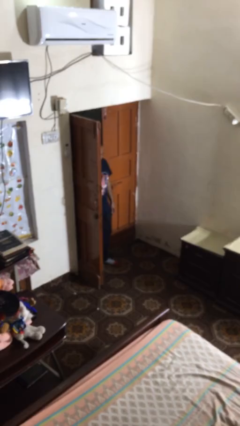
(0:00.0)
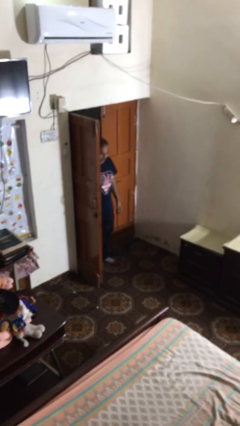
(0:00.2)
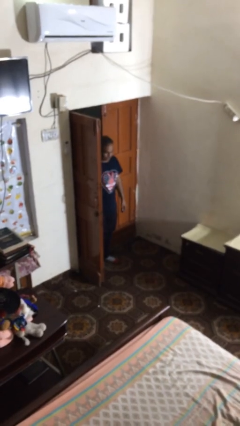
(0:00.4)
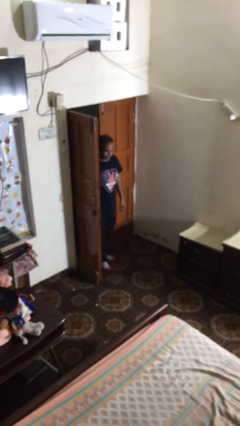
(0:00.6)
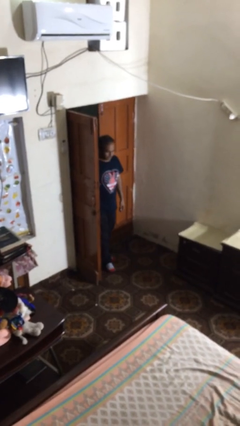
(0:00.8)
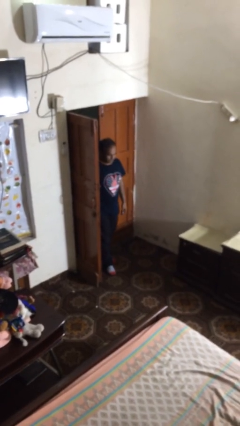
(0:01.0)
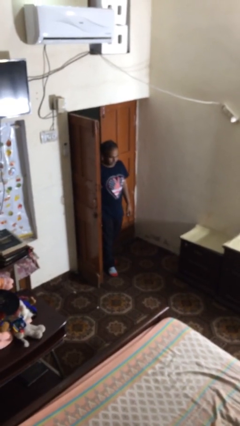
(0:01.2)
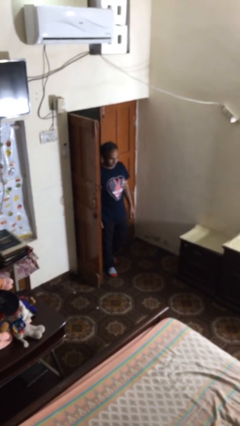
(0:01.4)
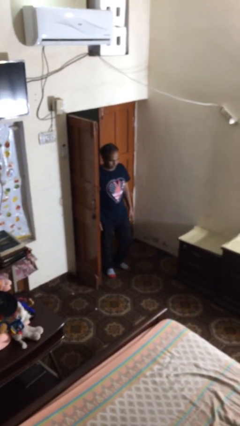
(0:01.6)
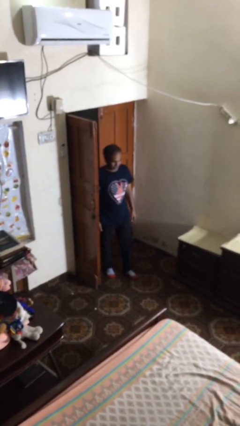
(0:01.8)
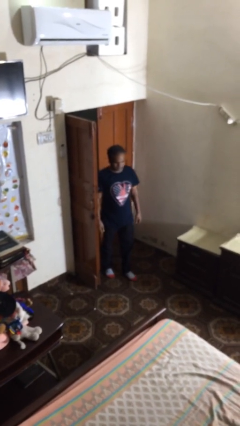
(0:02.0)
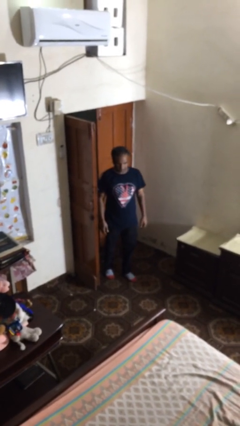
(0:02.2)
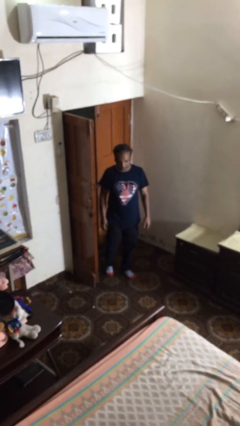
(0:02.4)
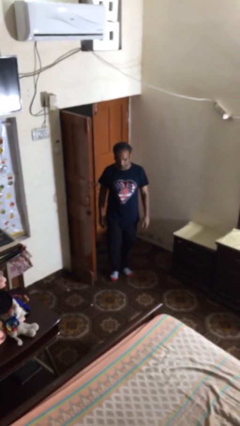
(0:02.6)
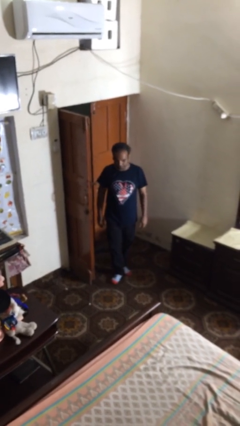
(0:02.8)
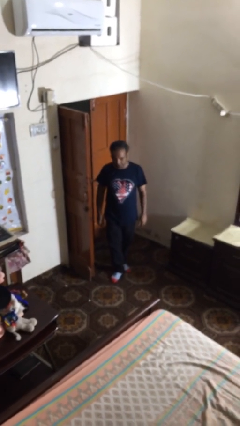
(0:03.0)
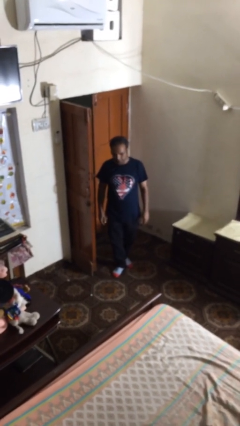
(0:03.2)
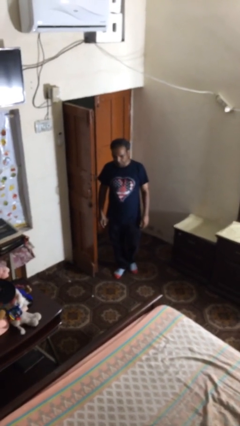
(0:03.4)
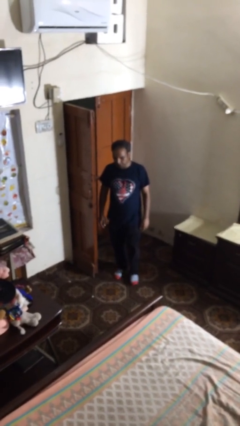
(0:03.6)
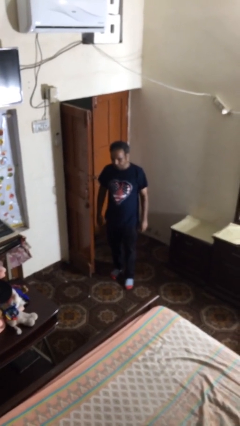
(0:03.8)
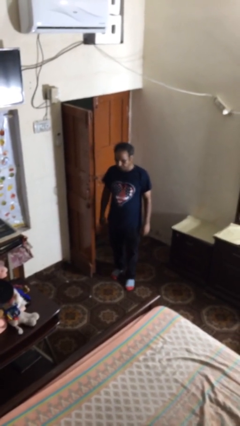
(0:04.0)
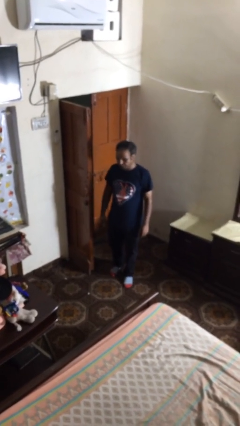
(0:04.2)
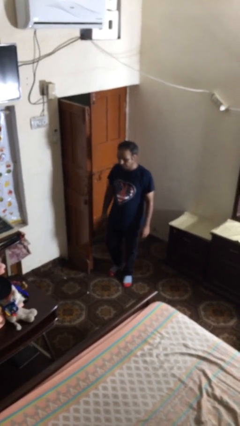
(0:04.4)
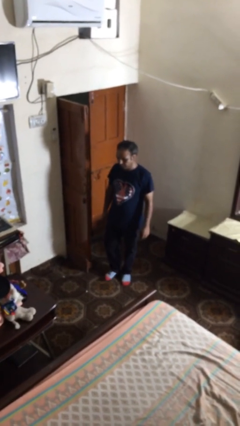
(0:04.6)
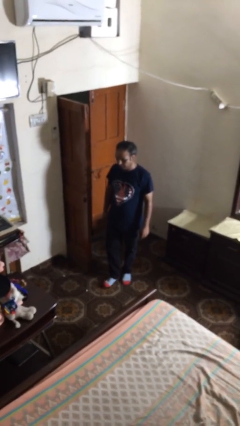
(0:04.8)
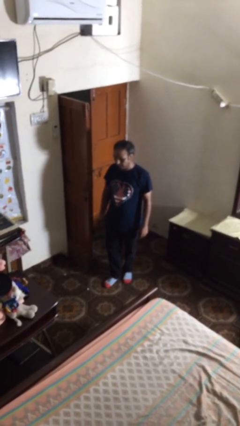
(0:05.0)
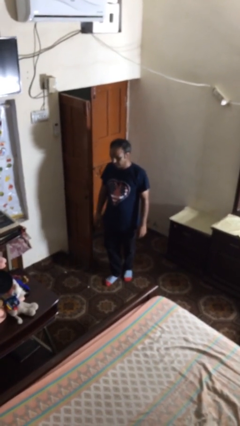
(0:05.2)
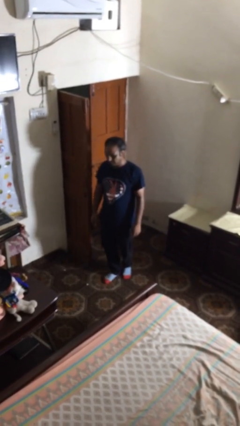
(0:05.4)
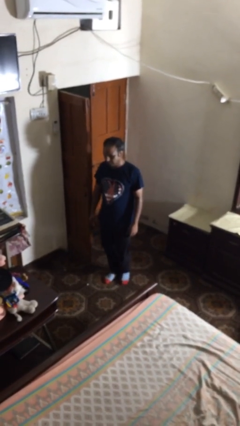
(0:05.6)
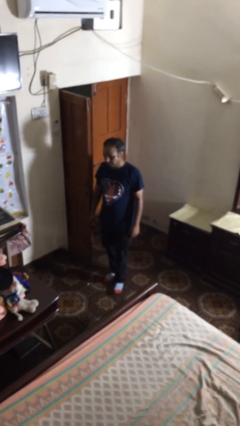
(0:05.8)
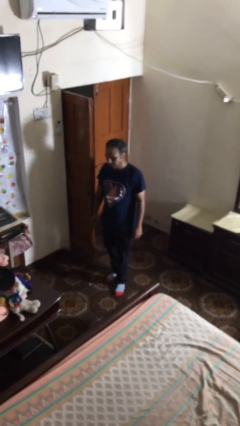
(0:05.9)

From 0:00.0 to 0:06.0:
person enters scene through structure

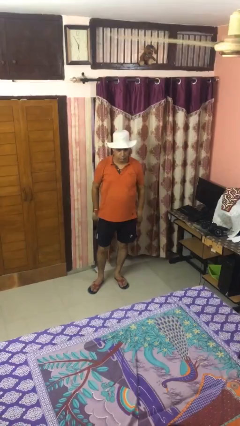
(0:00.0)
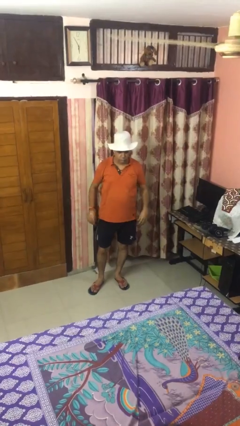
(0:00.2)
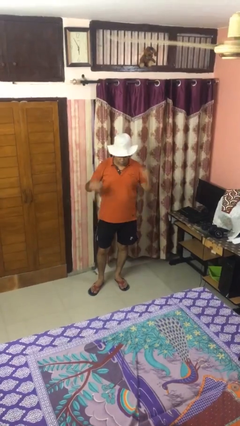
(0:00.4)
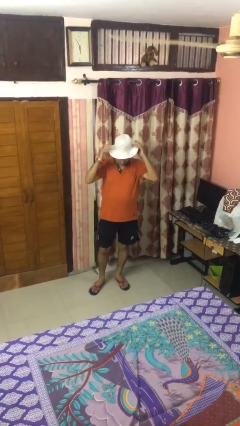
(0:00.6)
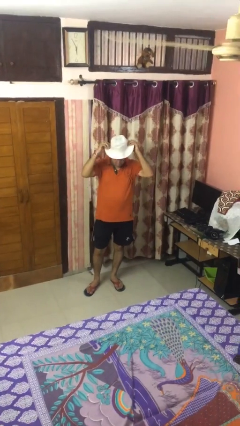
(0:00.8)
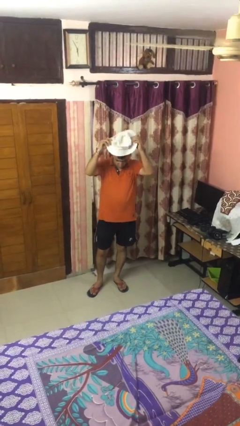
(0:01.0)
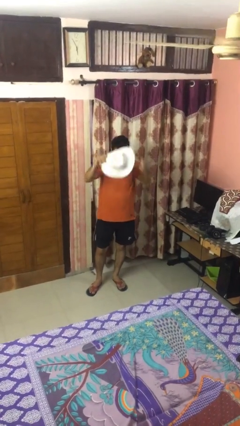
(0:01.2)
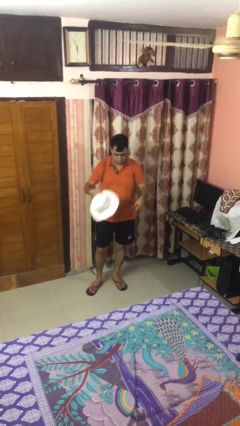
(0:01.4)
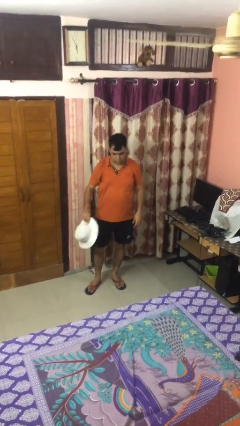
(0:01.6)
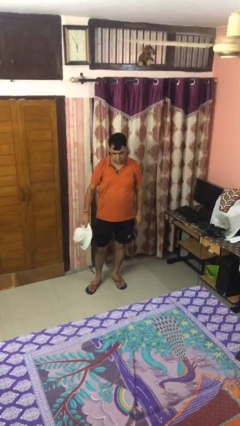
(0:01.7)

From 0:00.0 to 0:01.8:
person takes off hat

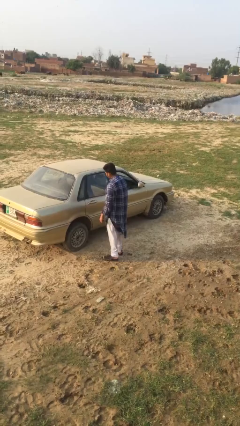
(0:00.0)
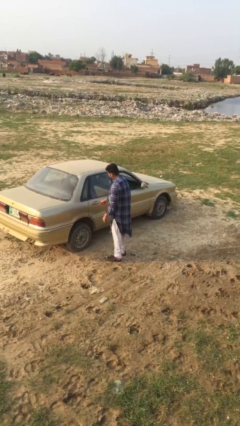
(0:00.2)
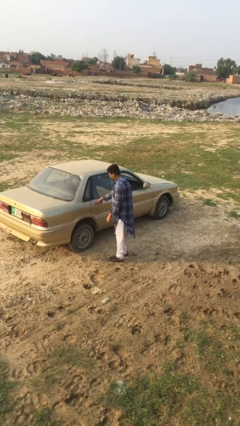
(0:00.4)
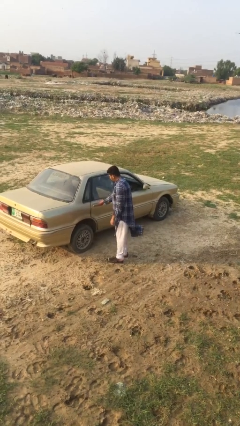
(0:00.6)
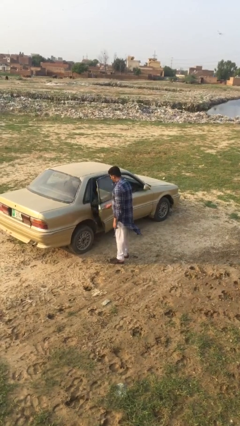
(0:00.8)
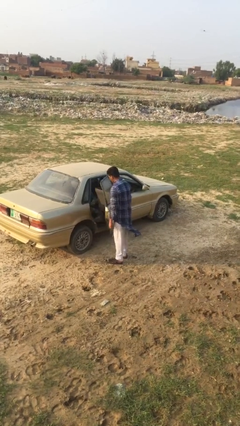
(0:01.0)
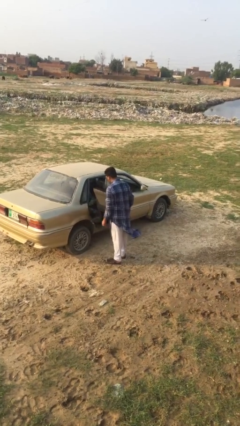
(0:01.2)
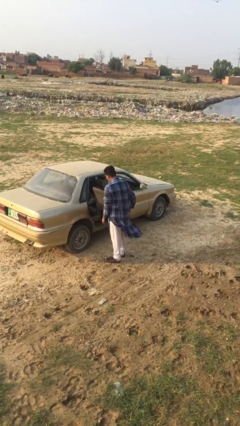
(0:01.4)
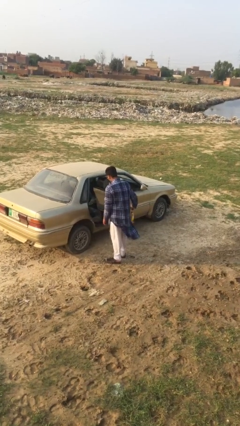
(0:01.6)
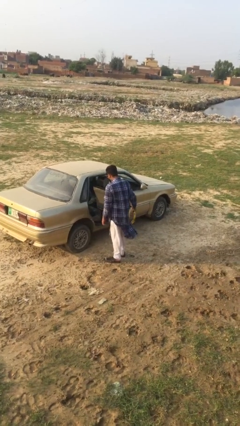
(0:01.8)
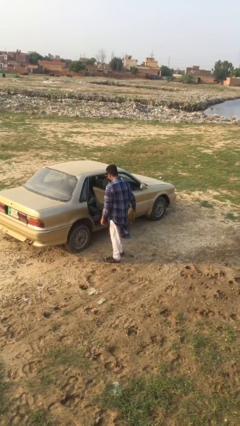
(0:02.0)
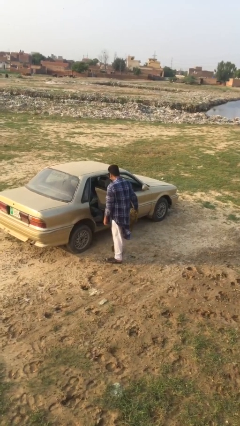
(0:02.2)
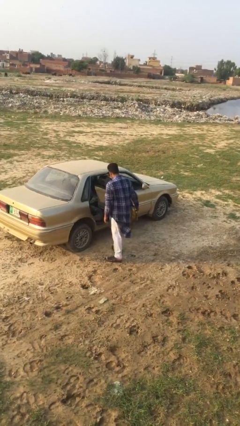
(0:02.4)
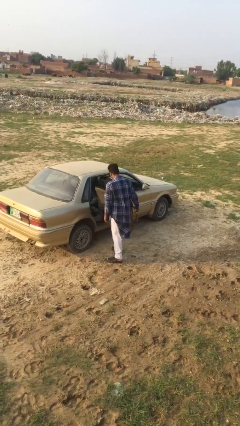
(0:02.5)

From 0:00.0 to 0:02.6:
person opens car door

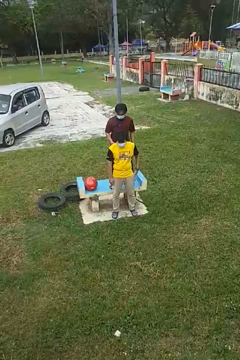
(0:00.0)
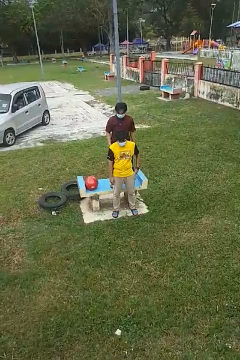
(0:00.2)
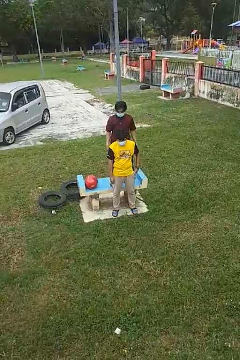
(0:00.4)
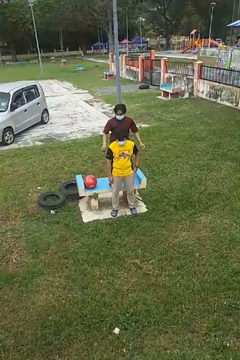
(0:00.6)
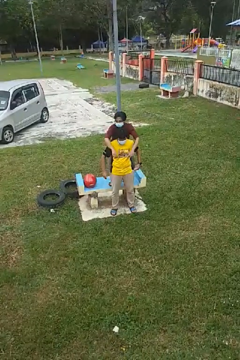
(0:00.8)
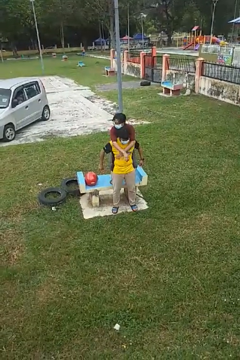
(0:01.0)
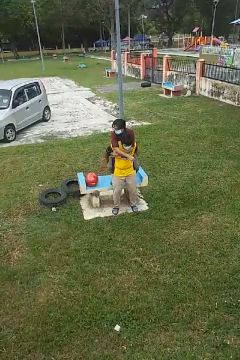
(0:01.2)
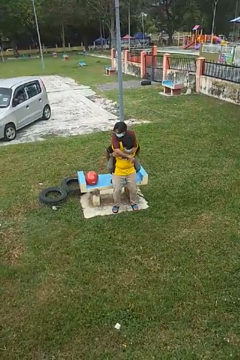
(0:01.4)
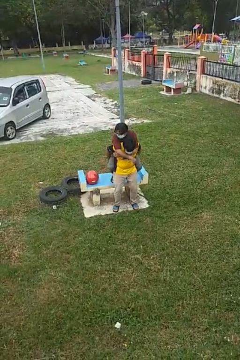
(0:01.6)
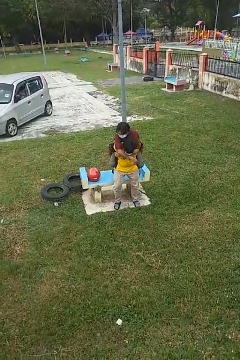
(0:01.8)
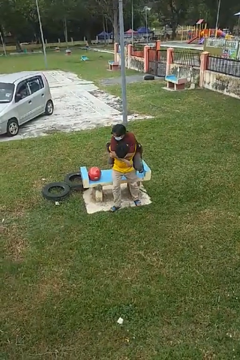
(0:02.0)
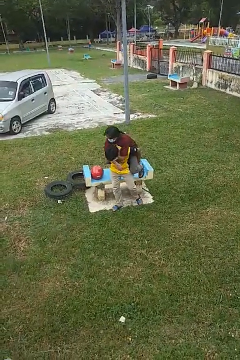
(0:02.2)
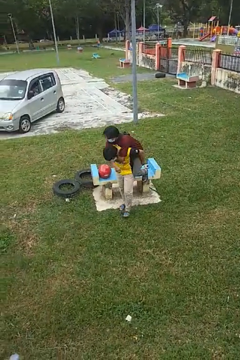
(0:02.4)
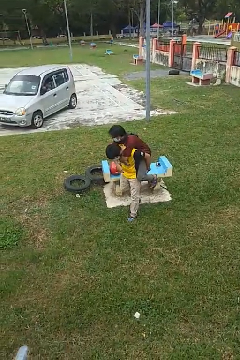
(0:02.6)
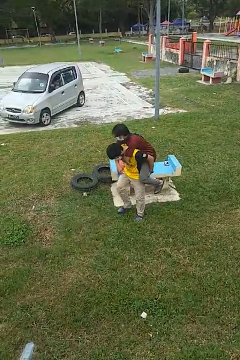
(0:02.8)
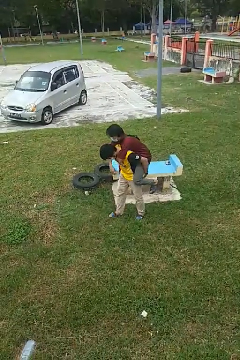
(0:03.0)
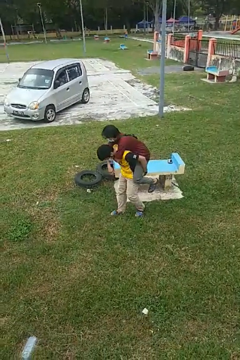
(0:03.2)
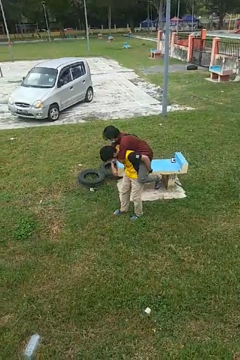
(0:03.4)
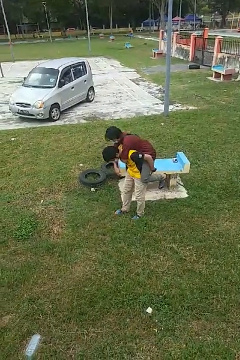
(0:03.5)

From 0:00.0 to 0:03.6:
person carries person over shoulder

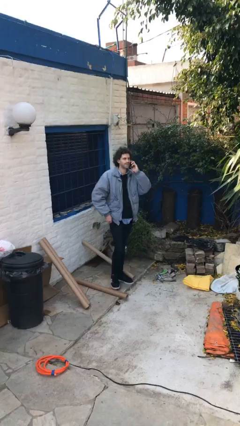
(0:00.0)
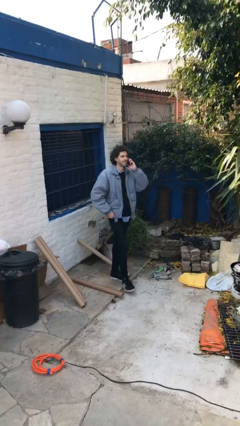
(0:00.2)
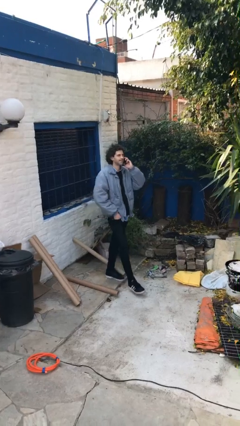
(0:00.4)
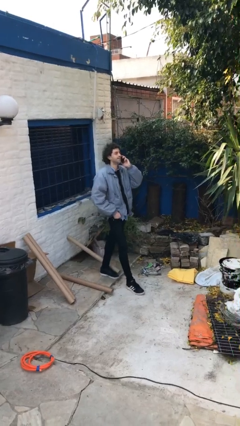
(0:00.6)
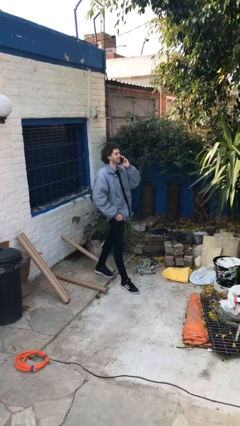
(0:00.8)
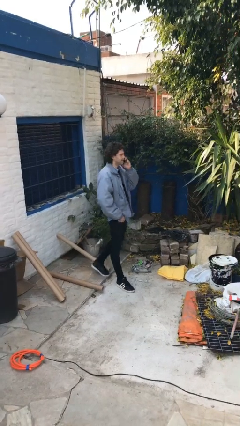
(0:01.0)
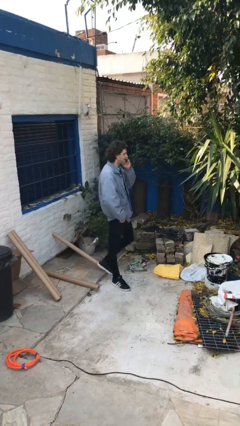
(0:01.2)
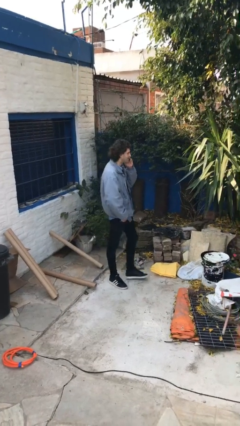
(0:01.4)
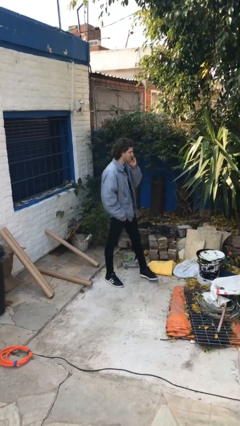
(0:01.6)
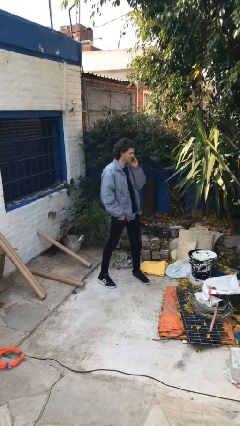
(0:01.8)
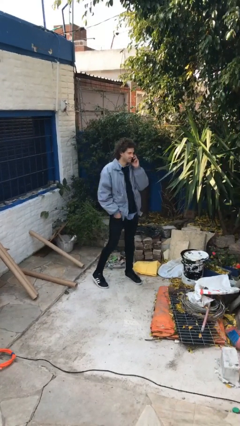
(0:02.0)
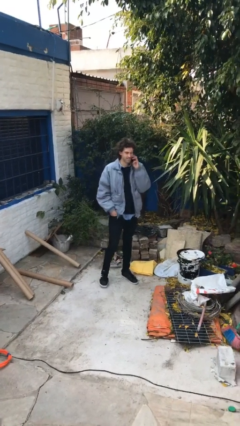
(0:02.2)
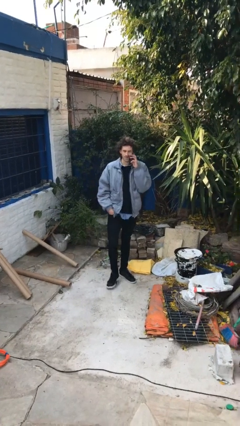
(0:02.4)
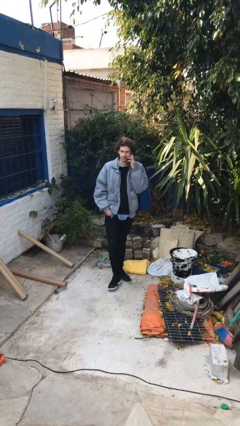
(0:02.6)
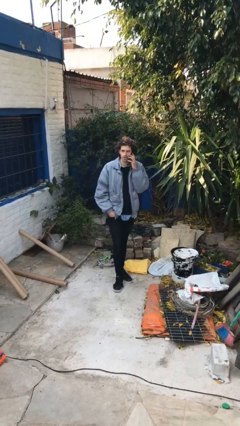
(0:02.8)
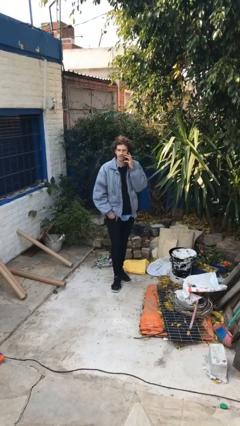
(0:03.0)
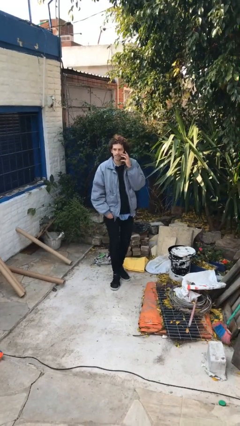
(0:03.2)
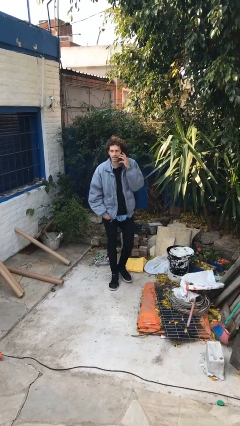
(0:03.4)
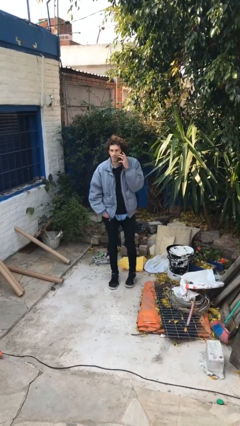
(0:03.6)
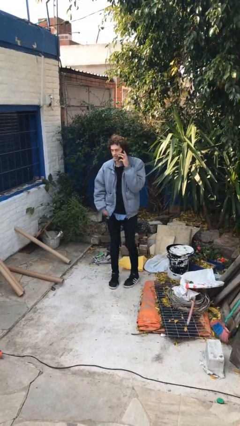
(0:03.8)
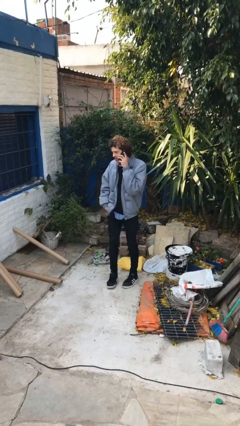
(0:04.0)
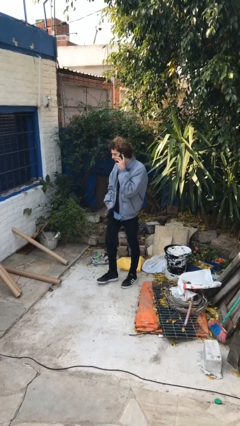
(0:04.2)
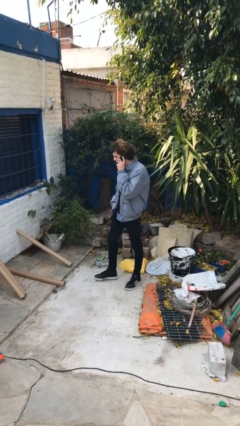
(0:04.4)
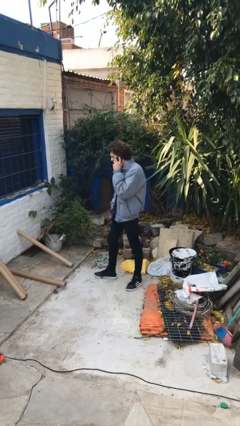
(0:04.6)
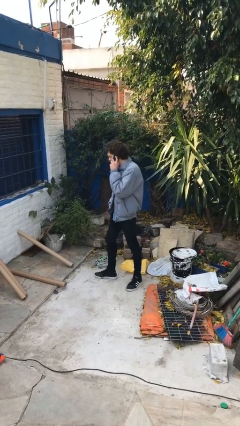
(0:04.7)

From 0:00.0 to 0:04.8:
person talks on phone
